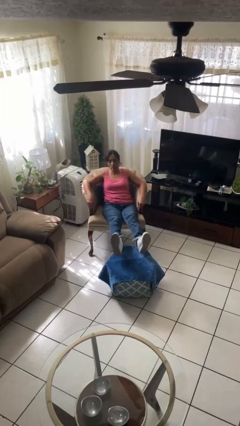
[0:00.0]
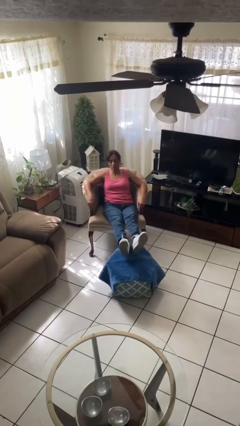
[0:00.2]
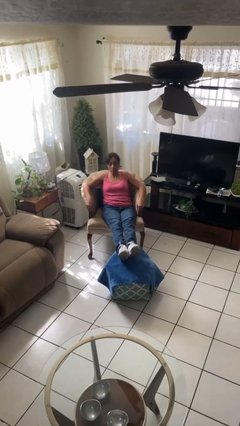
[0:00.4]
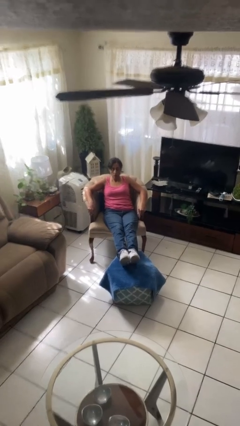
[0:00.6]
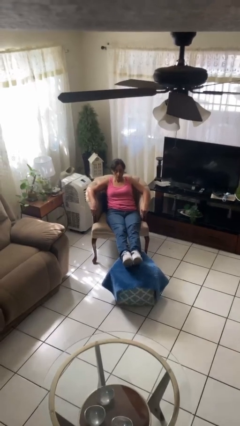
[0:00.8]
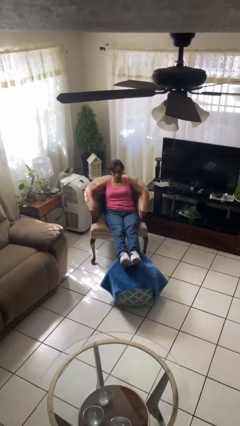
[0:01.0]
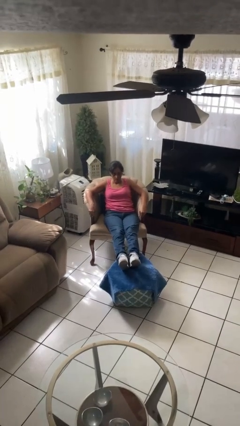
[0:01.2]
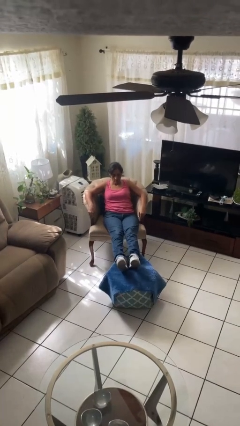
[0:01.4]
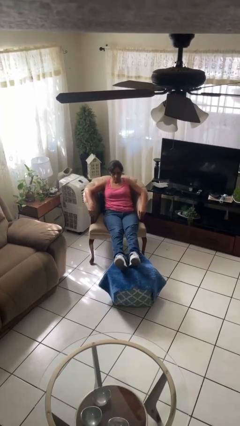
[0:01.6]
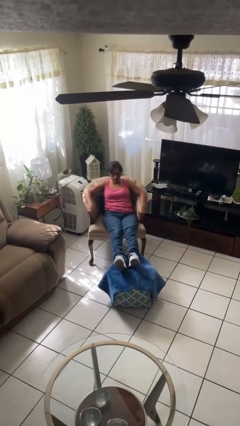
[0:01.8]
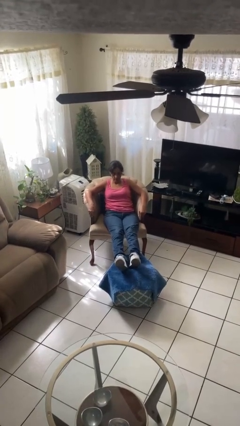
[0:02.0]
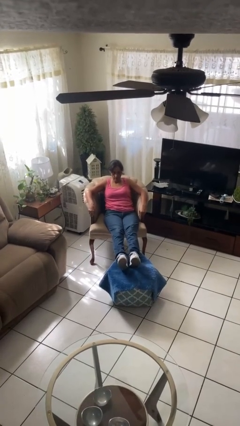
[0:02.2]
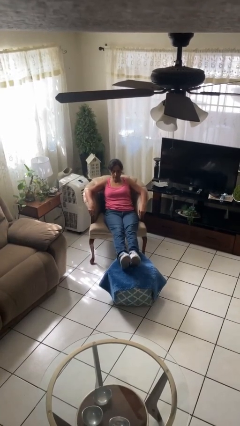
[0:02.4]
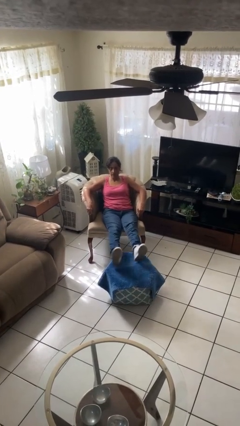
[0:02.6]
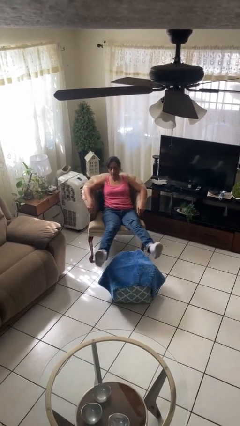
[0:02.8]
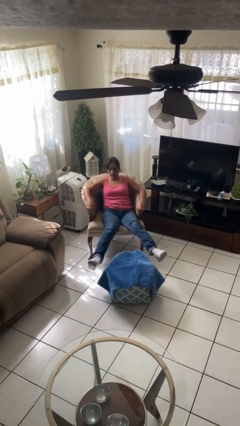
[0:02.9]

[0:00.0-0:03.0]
person puts feet up

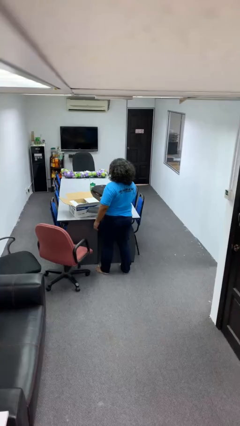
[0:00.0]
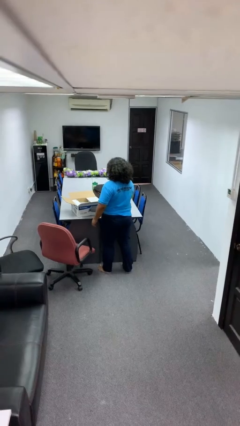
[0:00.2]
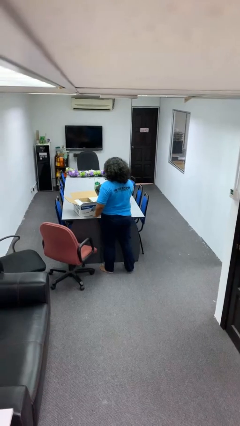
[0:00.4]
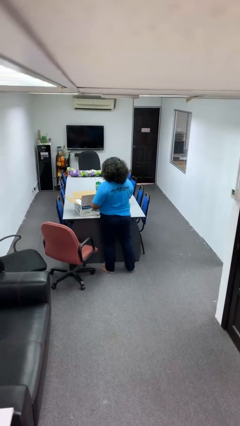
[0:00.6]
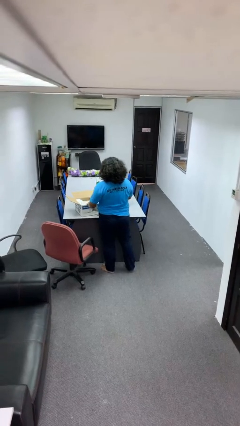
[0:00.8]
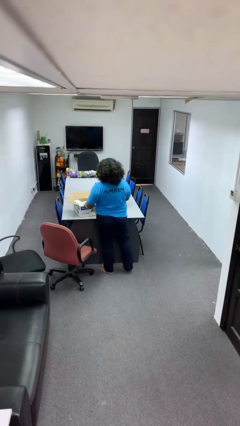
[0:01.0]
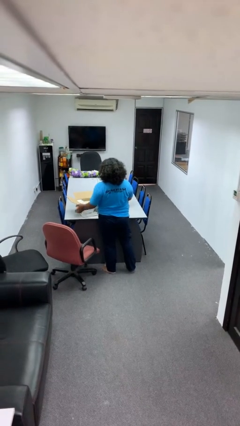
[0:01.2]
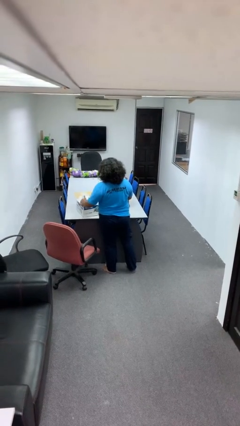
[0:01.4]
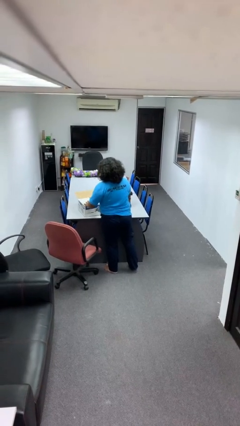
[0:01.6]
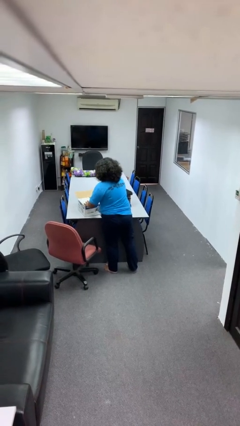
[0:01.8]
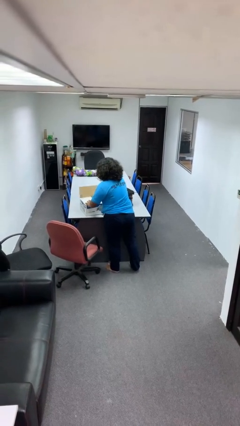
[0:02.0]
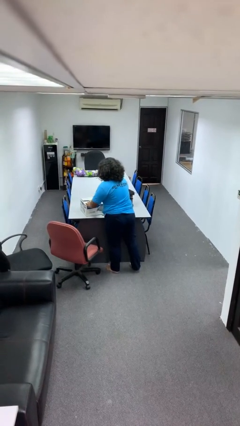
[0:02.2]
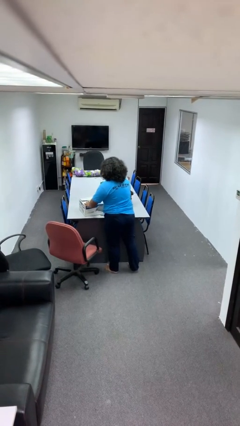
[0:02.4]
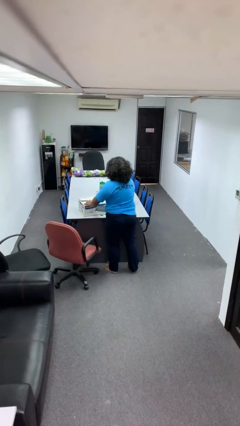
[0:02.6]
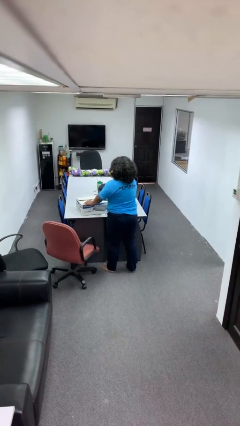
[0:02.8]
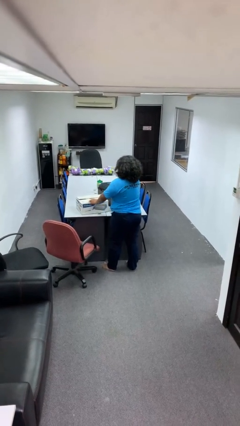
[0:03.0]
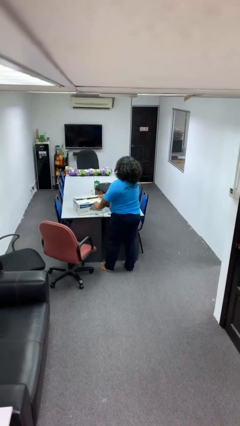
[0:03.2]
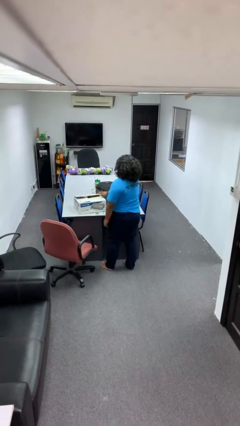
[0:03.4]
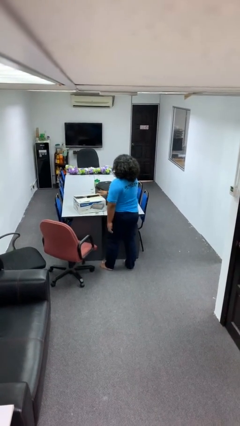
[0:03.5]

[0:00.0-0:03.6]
person closes box

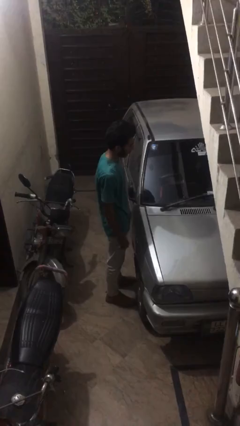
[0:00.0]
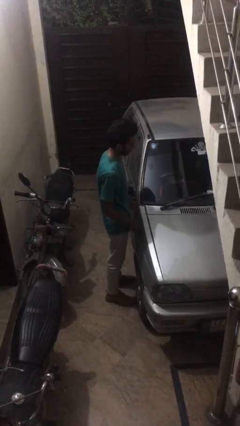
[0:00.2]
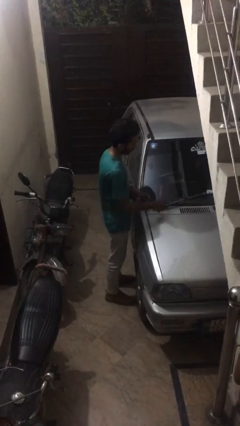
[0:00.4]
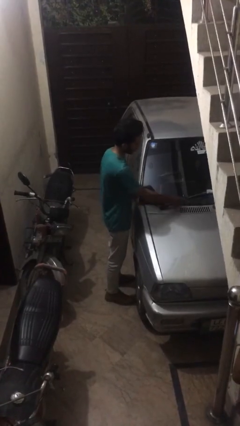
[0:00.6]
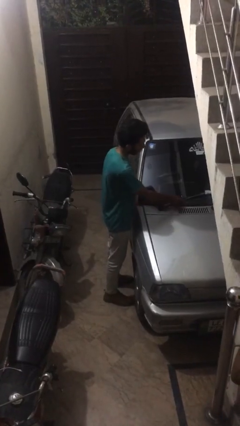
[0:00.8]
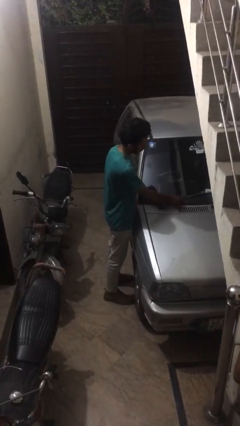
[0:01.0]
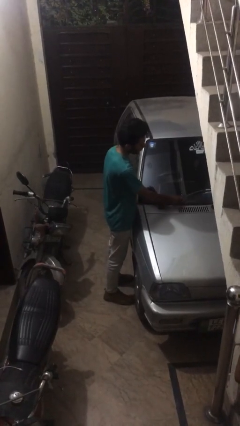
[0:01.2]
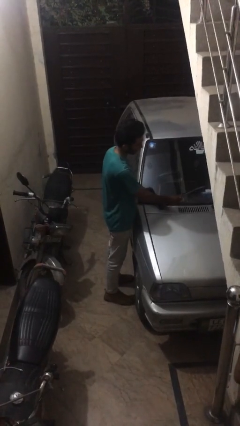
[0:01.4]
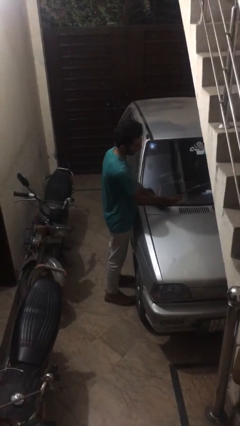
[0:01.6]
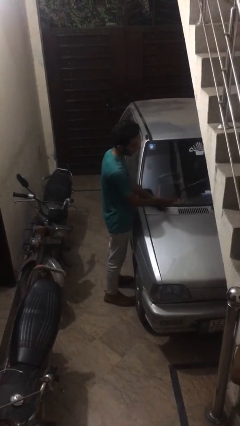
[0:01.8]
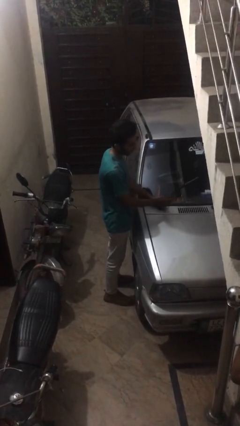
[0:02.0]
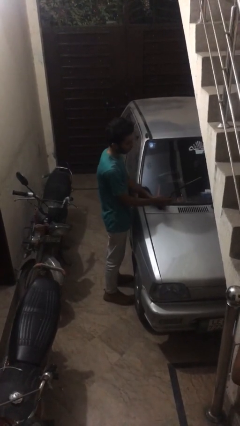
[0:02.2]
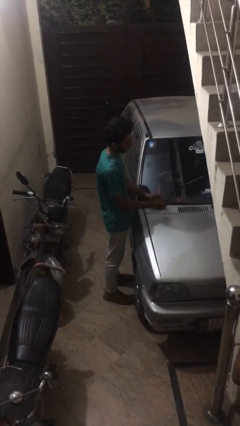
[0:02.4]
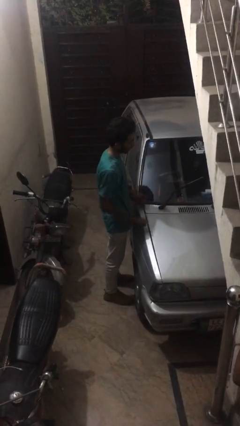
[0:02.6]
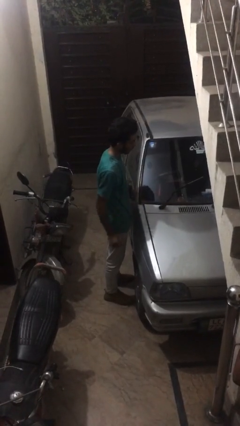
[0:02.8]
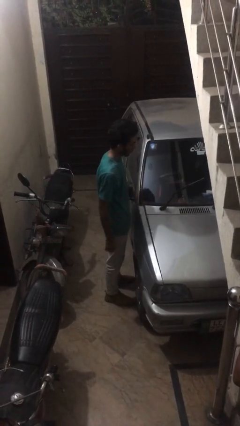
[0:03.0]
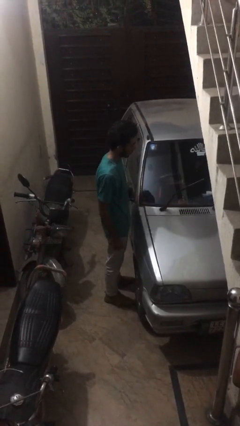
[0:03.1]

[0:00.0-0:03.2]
person flips up car wipers

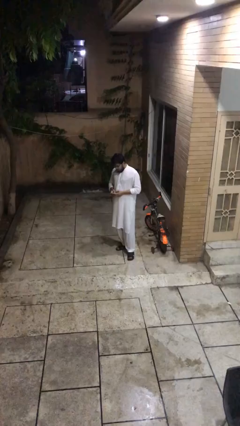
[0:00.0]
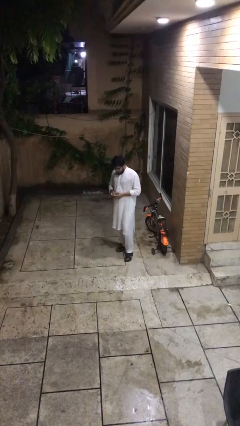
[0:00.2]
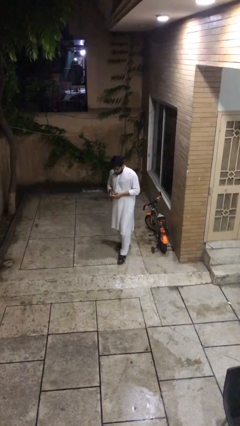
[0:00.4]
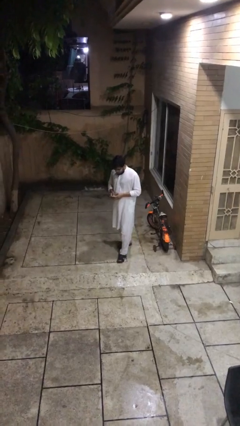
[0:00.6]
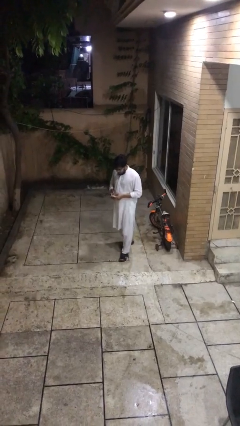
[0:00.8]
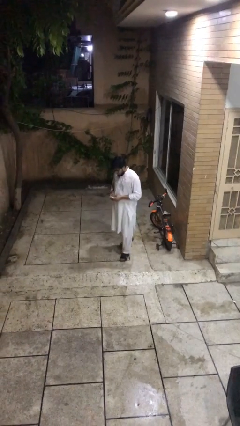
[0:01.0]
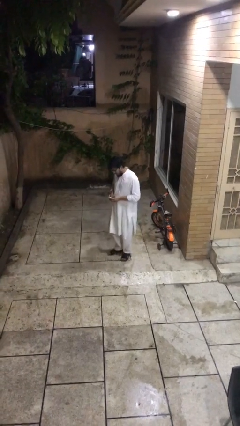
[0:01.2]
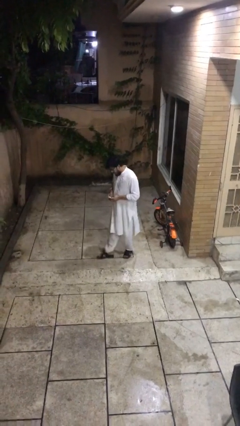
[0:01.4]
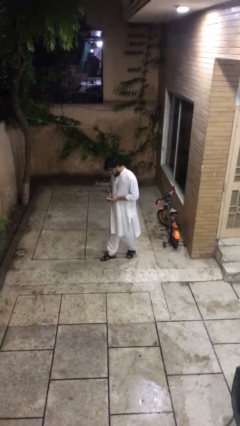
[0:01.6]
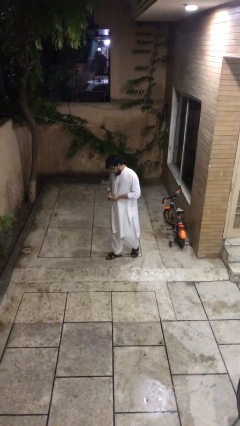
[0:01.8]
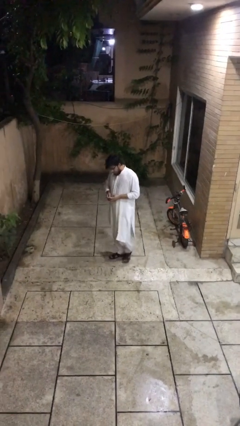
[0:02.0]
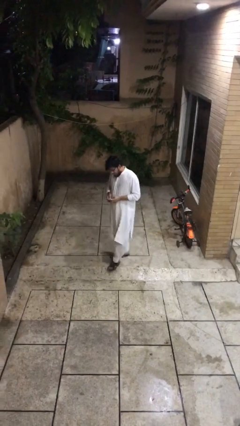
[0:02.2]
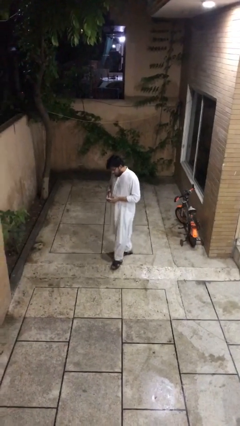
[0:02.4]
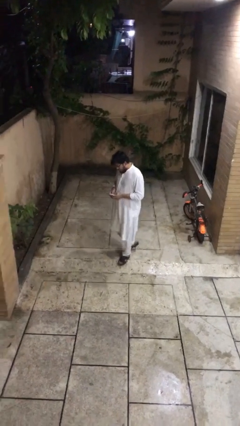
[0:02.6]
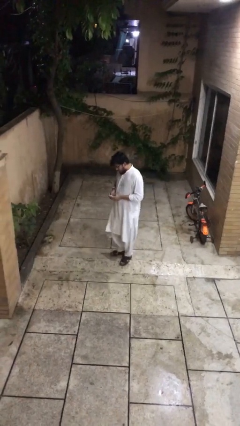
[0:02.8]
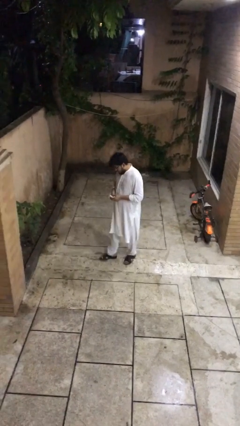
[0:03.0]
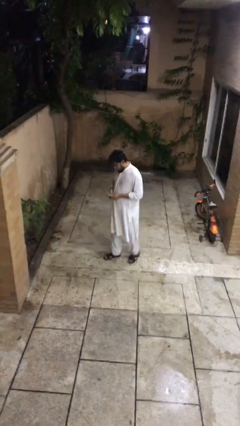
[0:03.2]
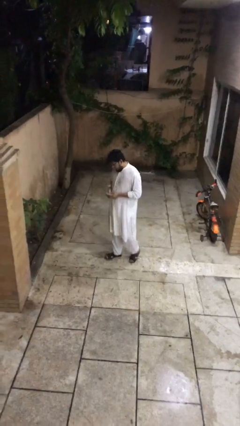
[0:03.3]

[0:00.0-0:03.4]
person texts on phone

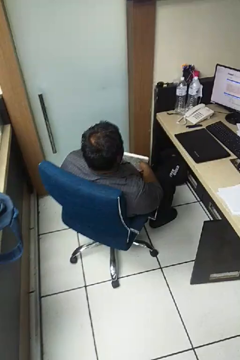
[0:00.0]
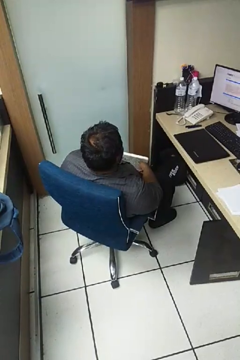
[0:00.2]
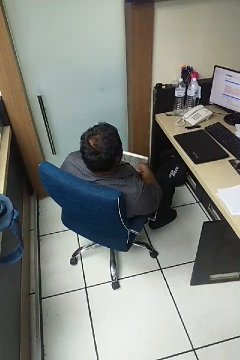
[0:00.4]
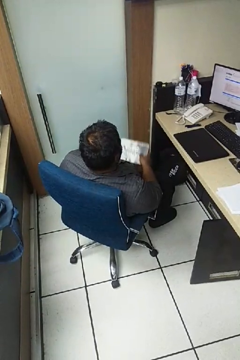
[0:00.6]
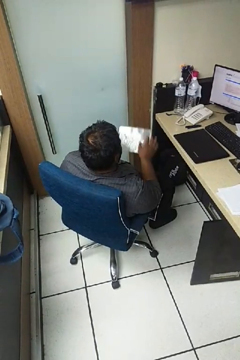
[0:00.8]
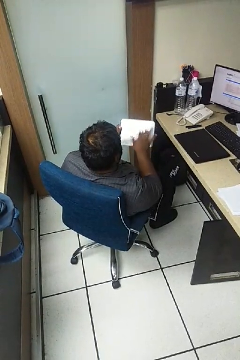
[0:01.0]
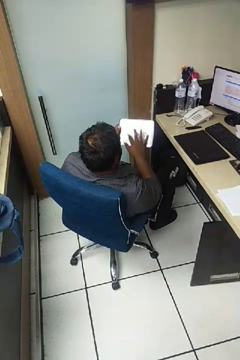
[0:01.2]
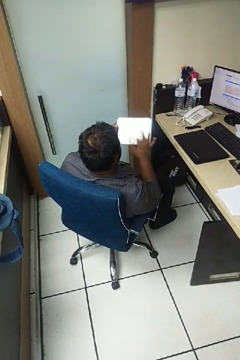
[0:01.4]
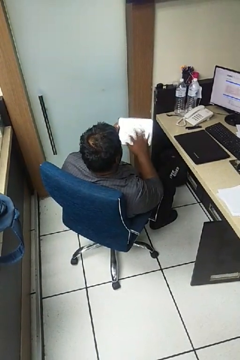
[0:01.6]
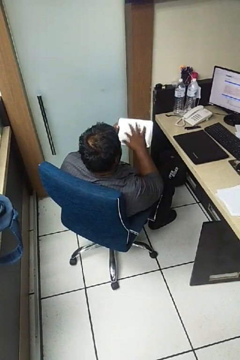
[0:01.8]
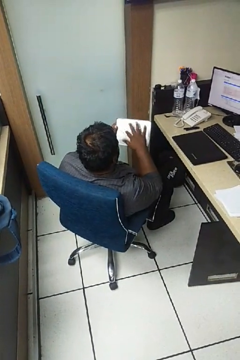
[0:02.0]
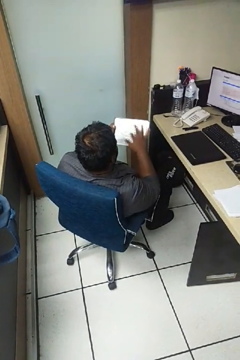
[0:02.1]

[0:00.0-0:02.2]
person interacts with tablet

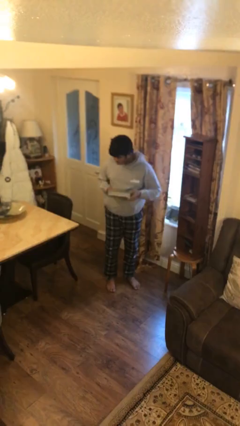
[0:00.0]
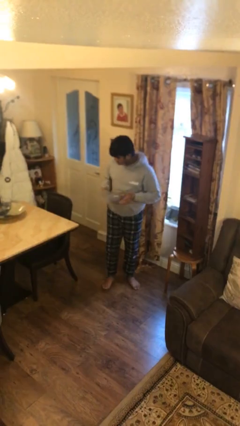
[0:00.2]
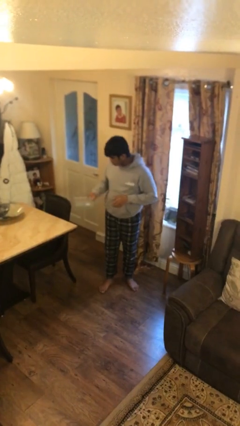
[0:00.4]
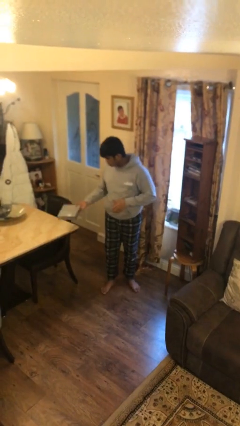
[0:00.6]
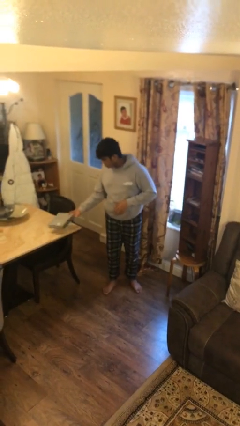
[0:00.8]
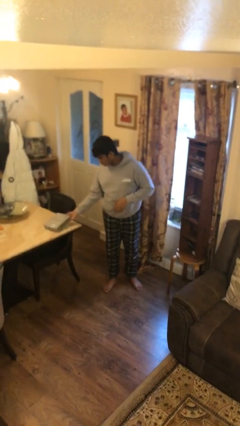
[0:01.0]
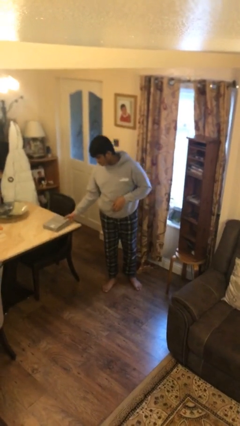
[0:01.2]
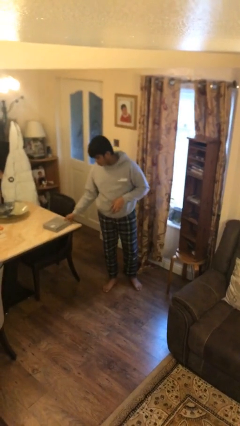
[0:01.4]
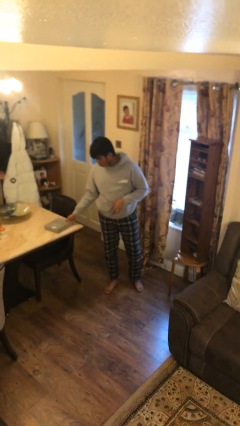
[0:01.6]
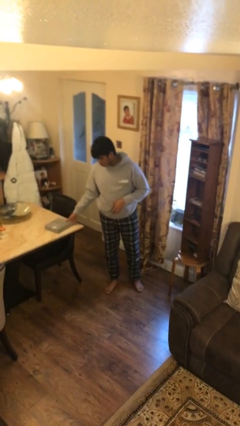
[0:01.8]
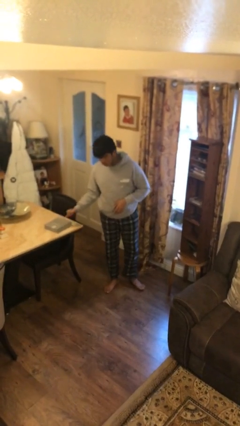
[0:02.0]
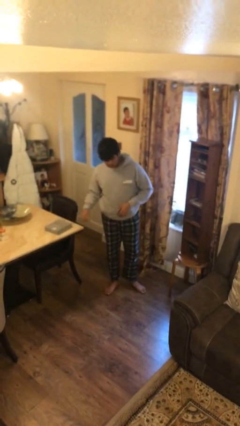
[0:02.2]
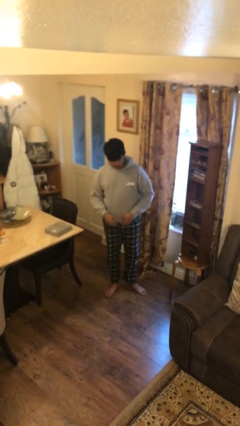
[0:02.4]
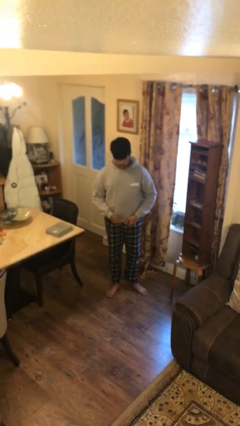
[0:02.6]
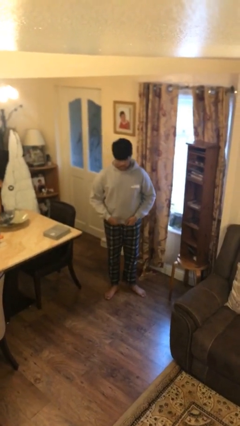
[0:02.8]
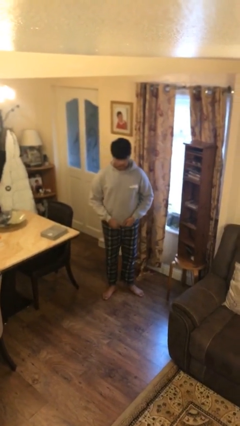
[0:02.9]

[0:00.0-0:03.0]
person puts down object on table
